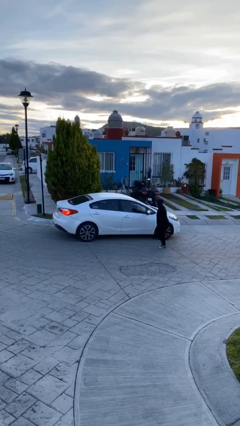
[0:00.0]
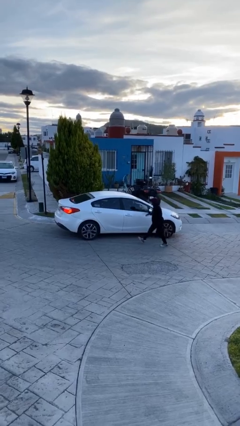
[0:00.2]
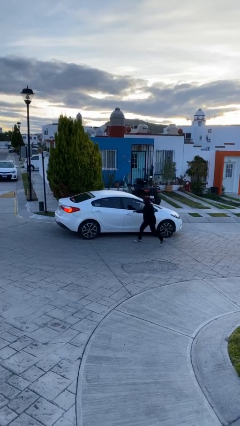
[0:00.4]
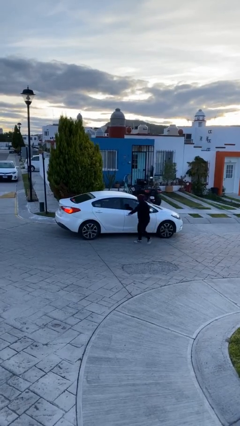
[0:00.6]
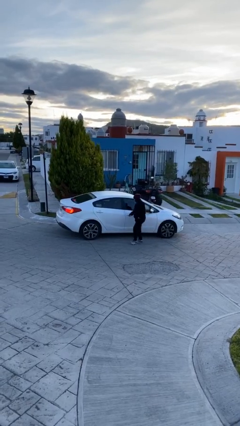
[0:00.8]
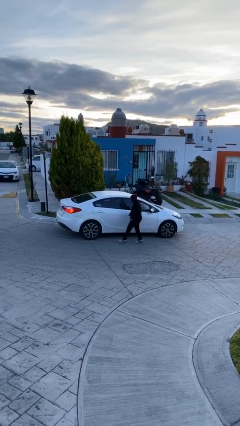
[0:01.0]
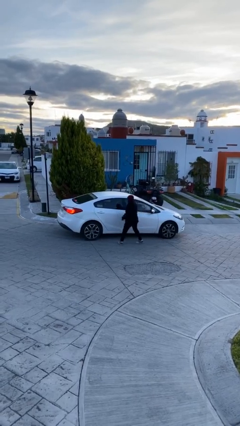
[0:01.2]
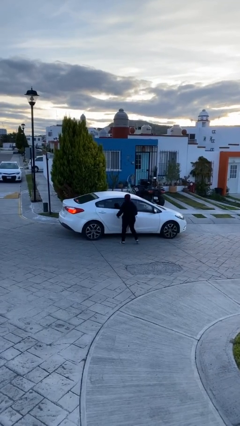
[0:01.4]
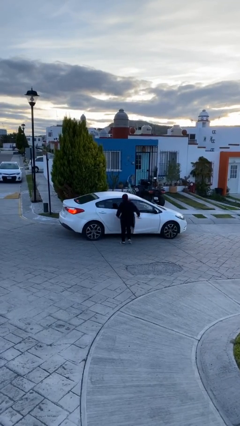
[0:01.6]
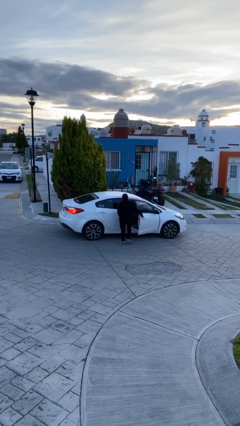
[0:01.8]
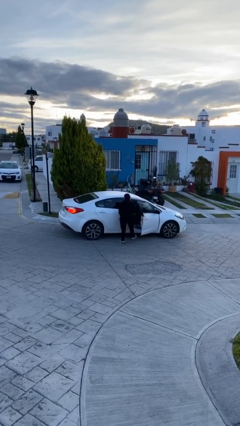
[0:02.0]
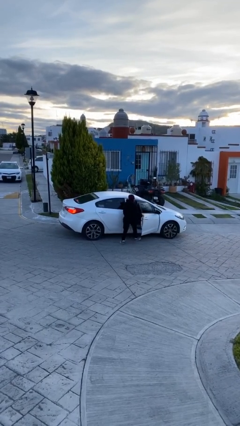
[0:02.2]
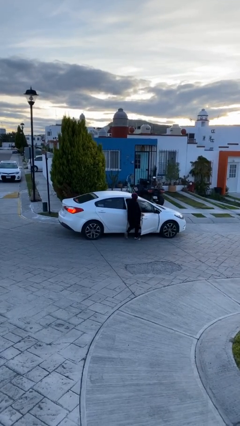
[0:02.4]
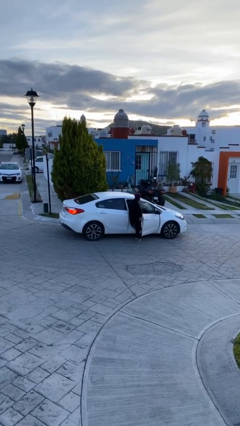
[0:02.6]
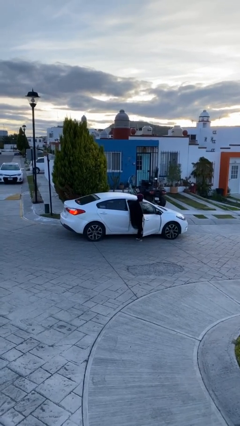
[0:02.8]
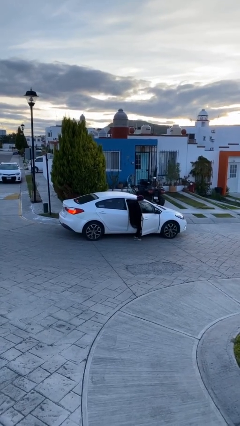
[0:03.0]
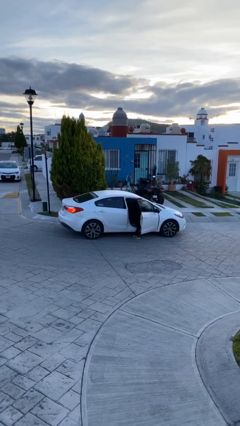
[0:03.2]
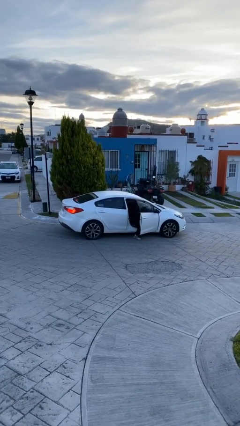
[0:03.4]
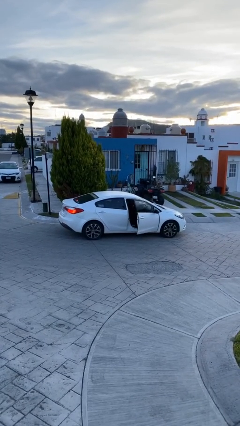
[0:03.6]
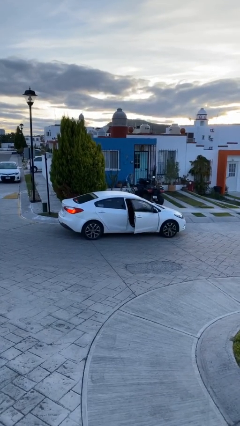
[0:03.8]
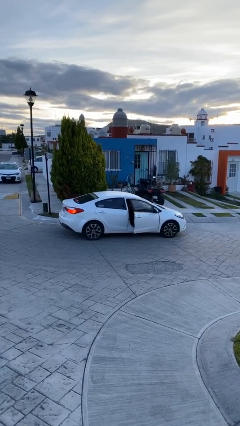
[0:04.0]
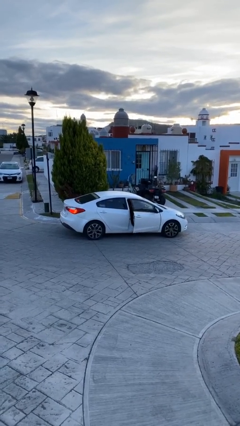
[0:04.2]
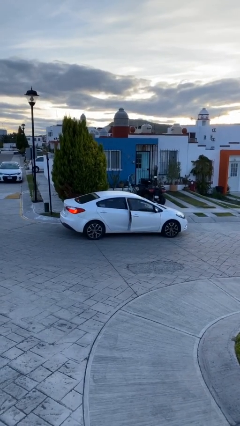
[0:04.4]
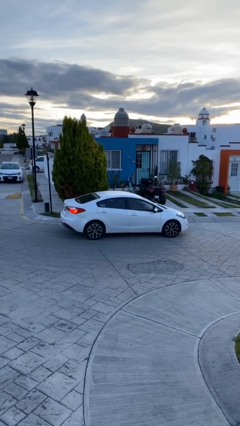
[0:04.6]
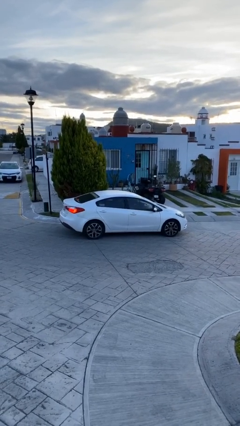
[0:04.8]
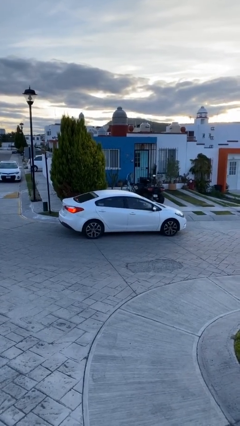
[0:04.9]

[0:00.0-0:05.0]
car picks up person

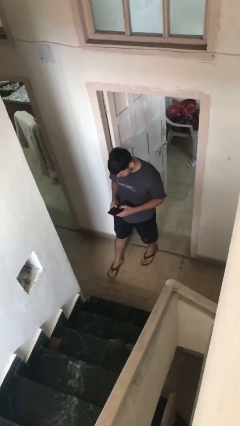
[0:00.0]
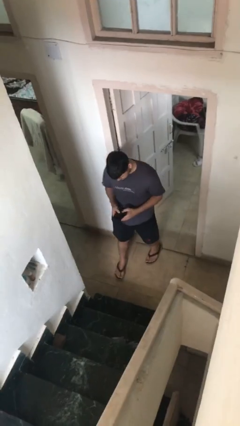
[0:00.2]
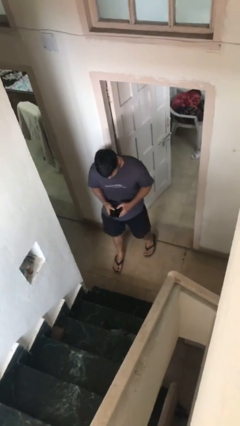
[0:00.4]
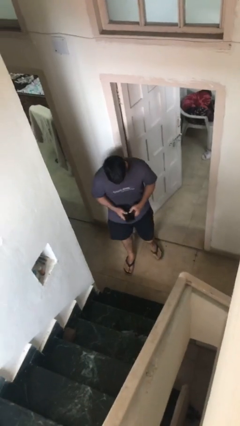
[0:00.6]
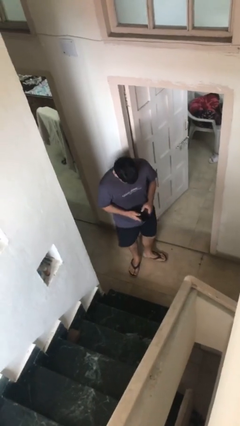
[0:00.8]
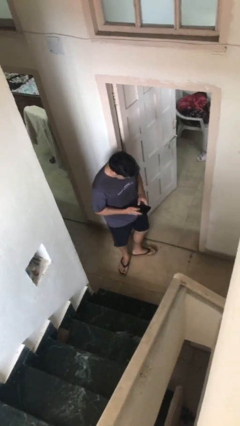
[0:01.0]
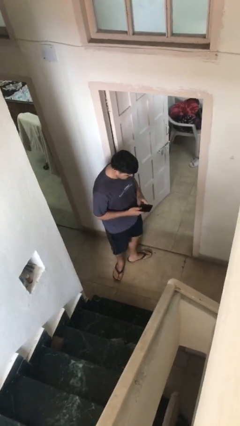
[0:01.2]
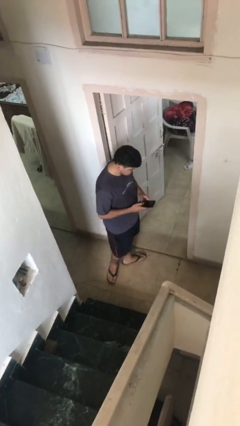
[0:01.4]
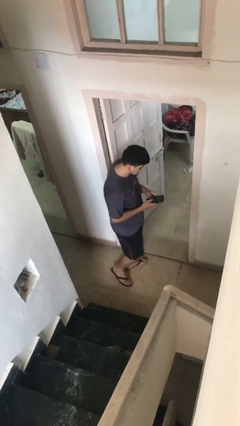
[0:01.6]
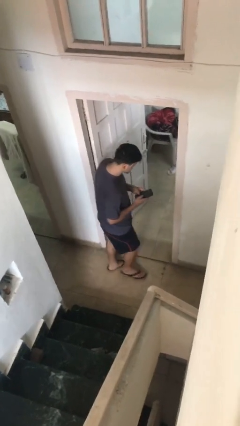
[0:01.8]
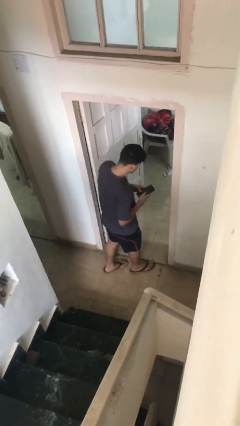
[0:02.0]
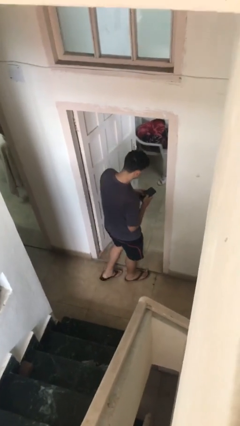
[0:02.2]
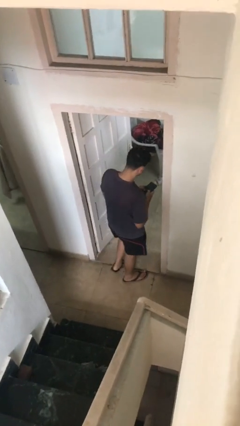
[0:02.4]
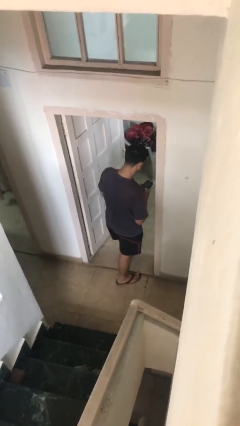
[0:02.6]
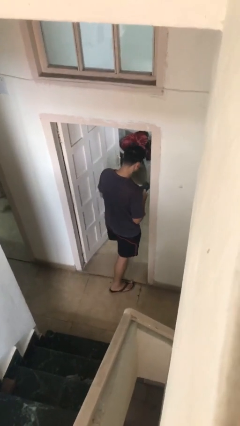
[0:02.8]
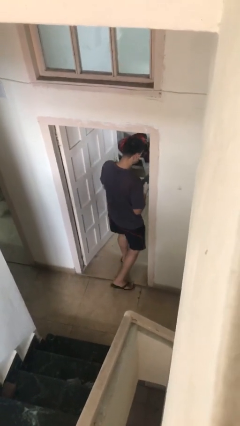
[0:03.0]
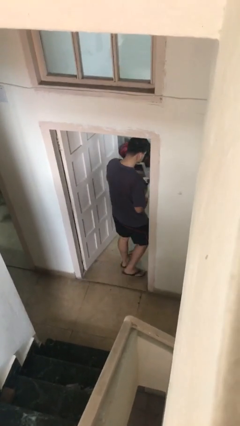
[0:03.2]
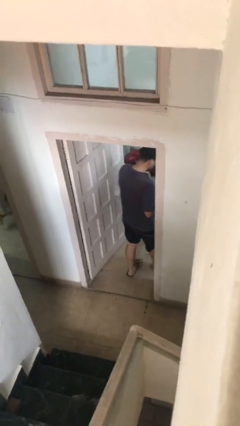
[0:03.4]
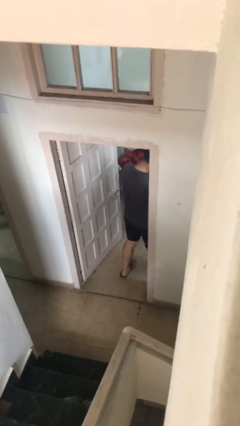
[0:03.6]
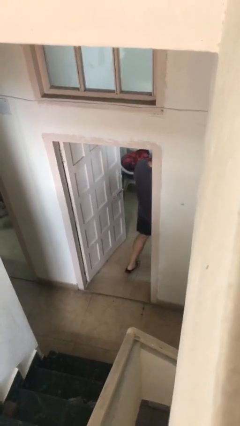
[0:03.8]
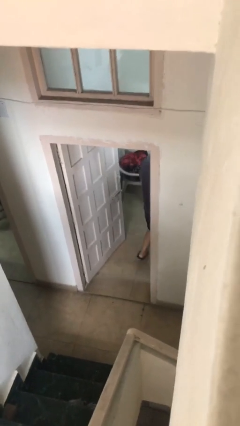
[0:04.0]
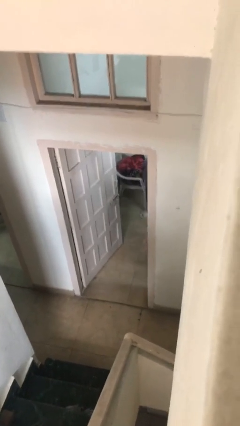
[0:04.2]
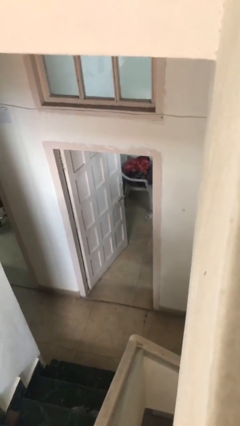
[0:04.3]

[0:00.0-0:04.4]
person exits scene through structure

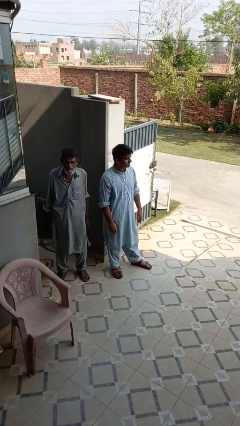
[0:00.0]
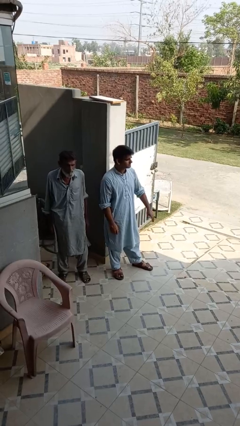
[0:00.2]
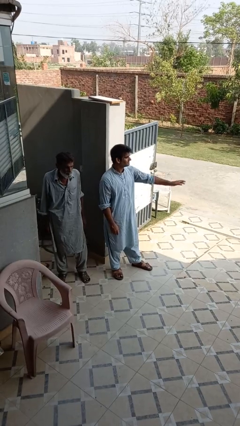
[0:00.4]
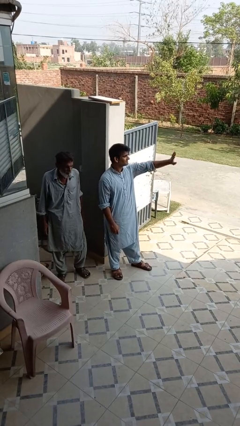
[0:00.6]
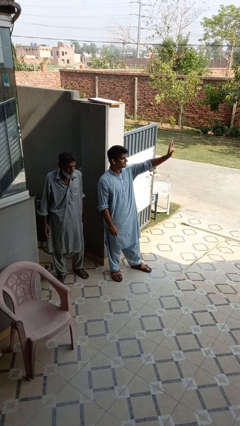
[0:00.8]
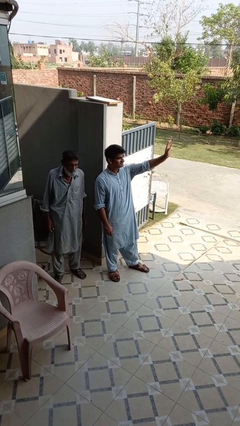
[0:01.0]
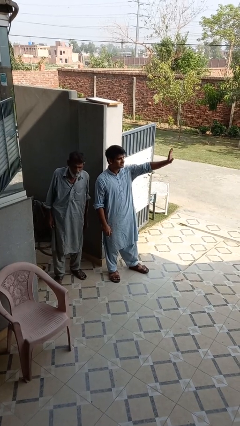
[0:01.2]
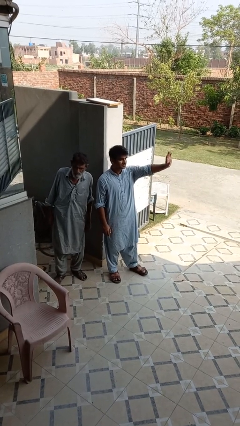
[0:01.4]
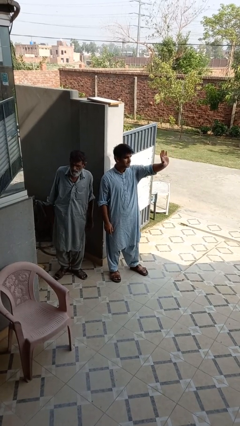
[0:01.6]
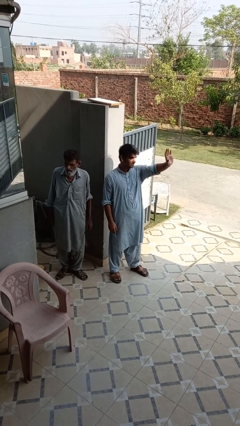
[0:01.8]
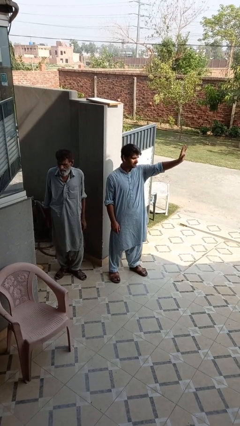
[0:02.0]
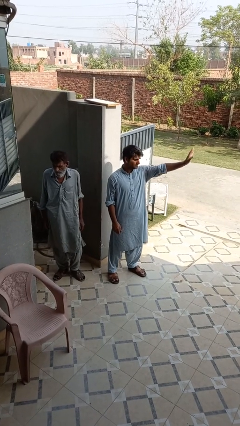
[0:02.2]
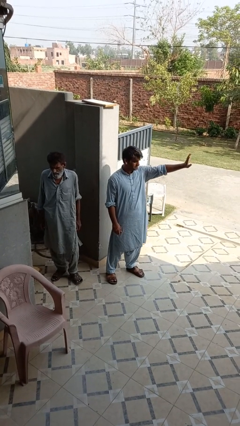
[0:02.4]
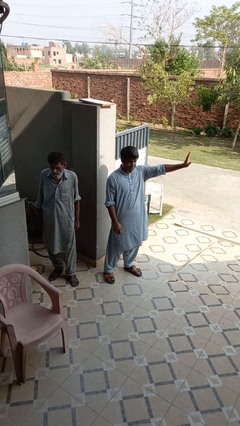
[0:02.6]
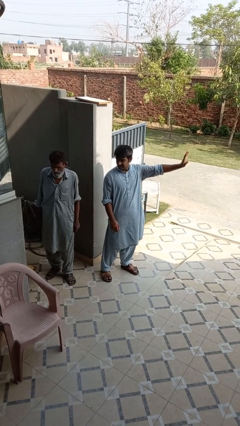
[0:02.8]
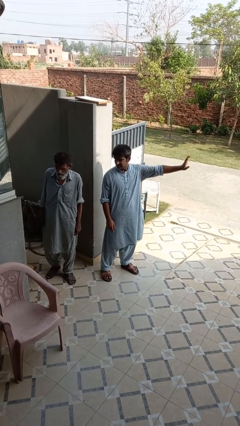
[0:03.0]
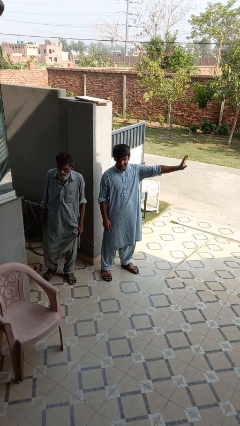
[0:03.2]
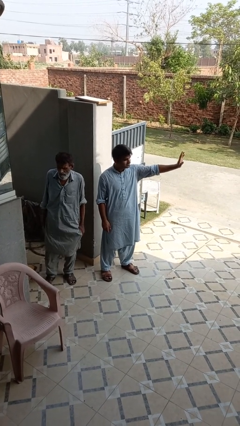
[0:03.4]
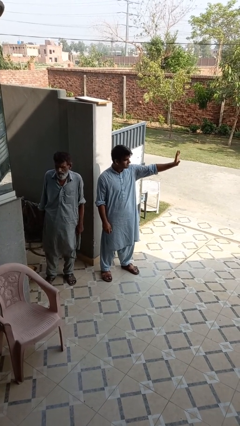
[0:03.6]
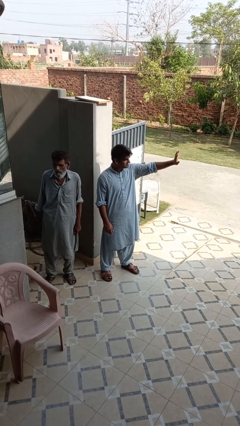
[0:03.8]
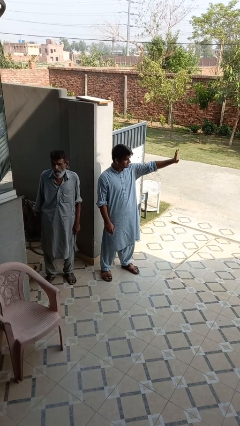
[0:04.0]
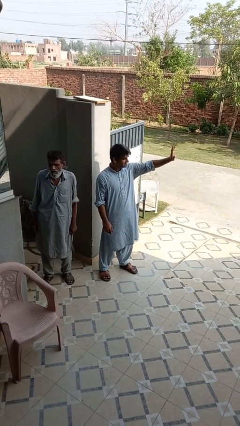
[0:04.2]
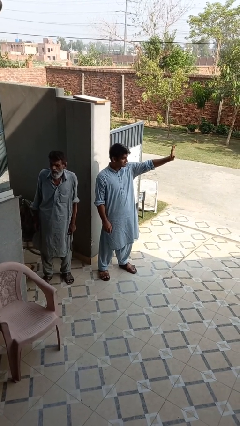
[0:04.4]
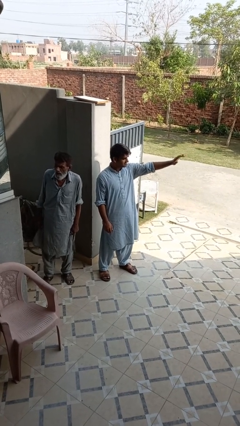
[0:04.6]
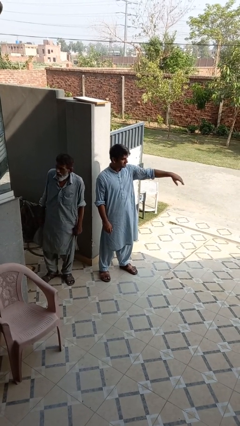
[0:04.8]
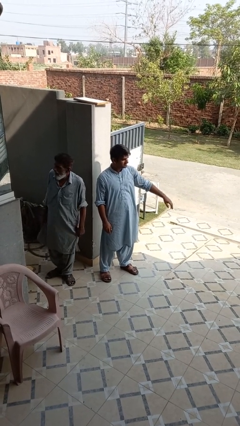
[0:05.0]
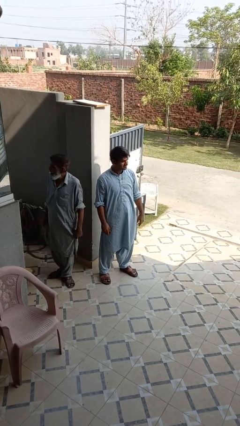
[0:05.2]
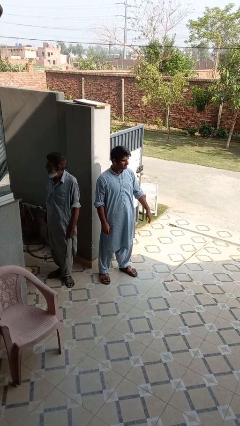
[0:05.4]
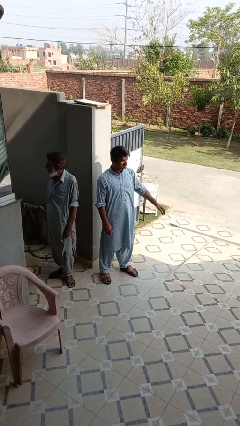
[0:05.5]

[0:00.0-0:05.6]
person waves at person

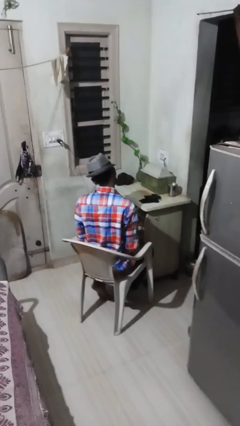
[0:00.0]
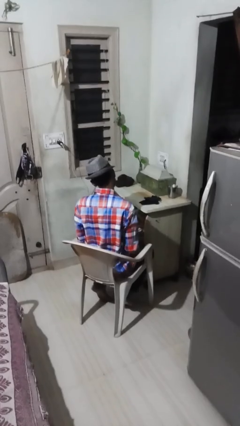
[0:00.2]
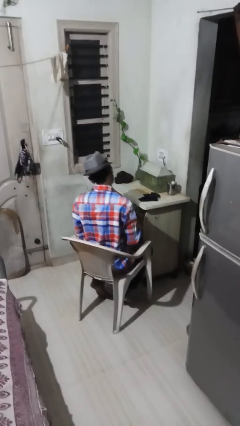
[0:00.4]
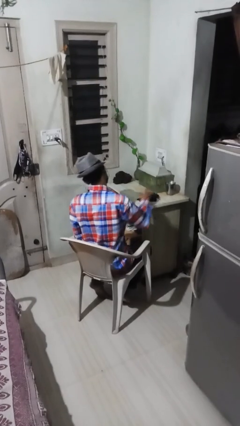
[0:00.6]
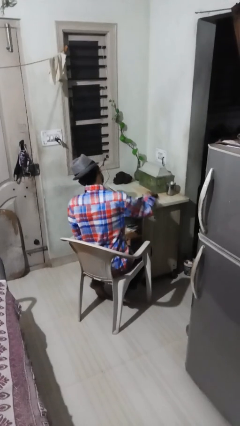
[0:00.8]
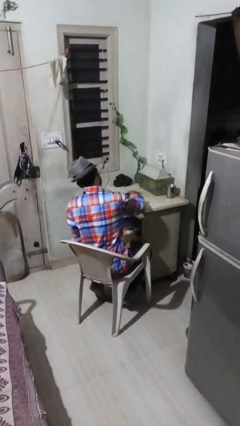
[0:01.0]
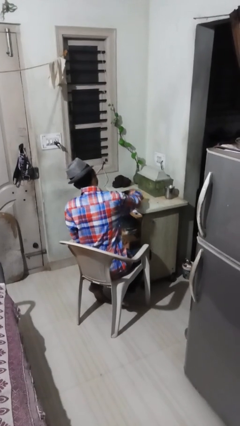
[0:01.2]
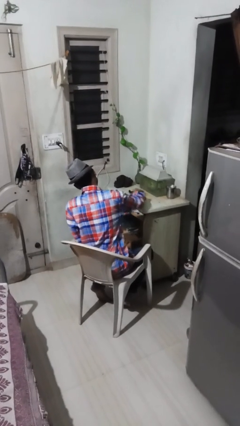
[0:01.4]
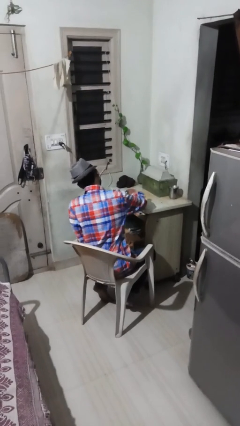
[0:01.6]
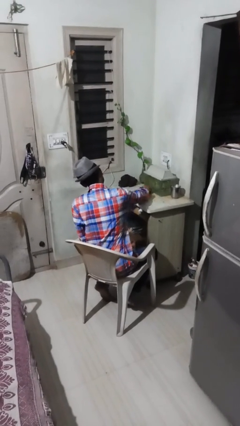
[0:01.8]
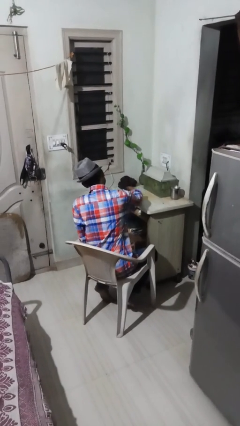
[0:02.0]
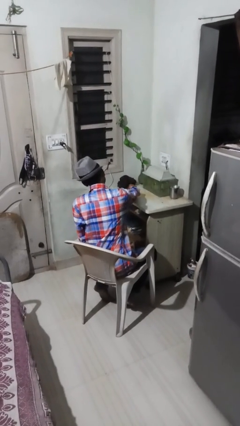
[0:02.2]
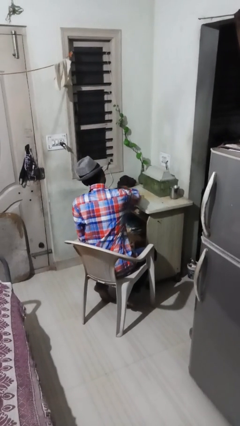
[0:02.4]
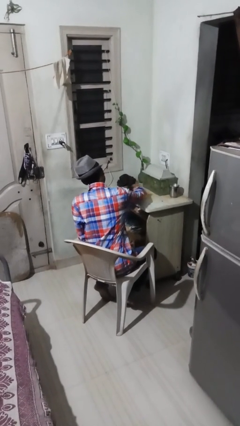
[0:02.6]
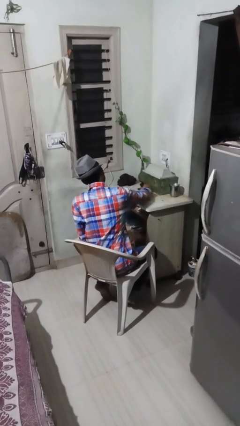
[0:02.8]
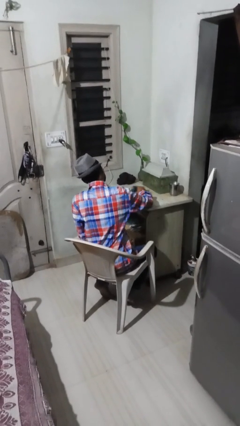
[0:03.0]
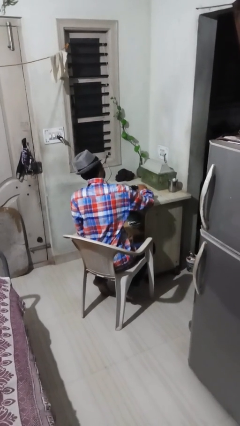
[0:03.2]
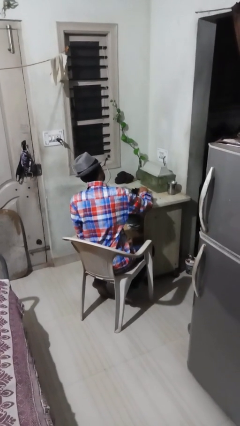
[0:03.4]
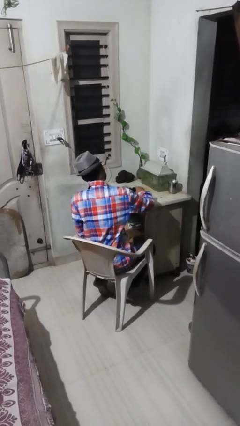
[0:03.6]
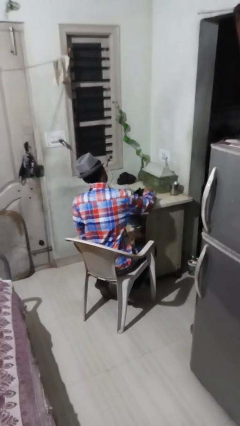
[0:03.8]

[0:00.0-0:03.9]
person cleans table with rag
